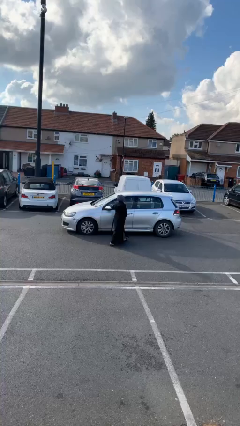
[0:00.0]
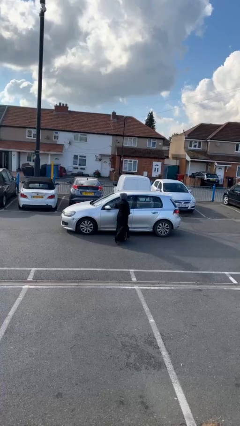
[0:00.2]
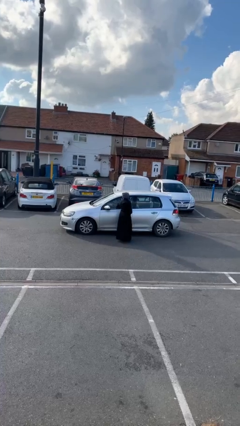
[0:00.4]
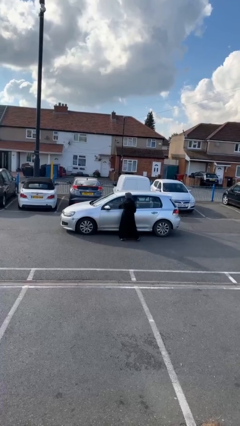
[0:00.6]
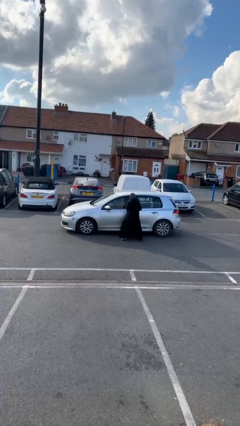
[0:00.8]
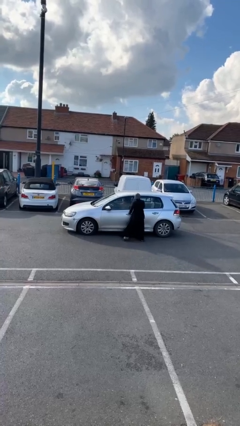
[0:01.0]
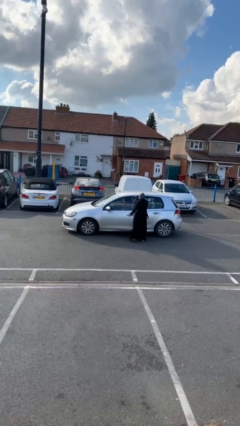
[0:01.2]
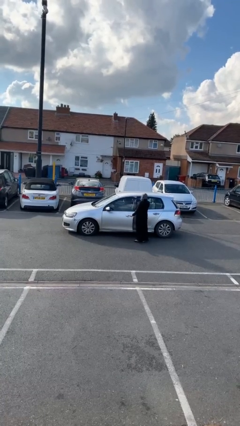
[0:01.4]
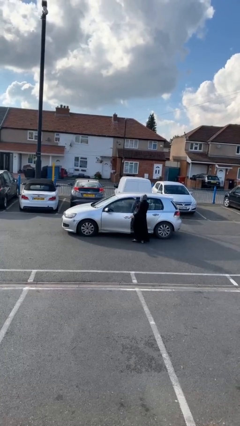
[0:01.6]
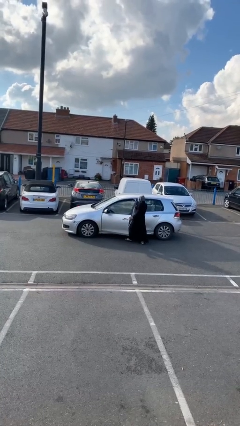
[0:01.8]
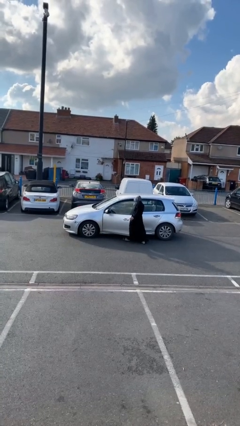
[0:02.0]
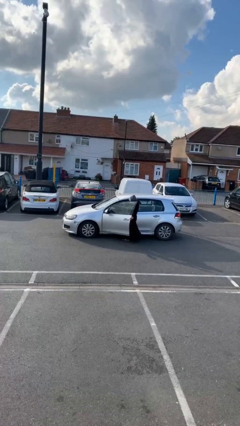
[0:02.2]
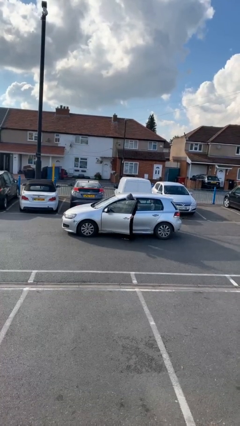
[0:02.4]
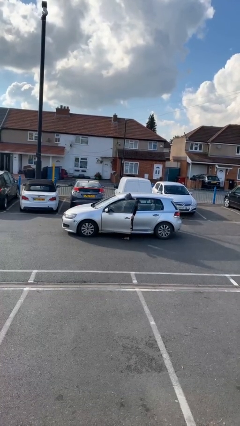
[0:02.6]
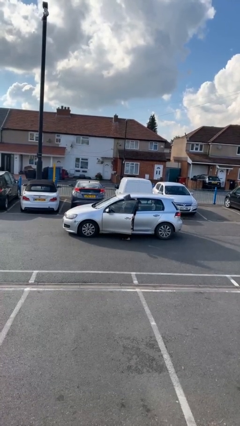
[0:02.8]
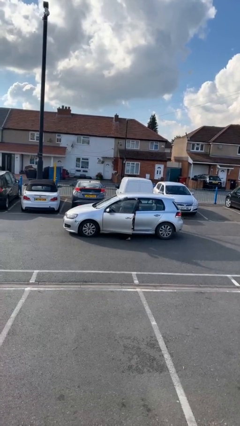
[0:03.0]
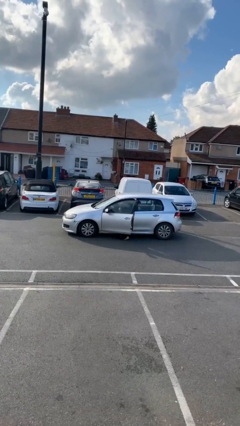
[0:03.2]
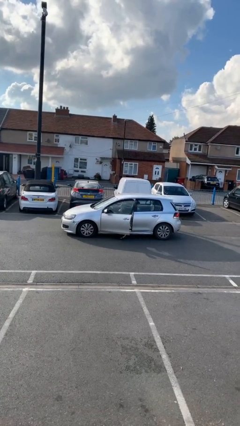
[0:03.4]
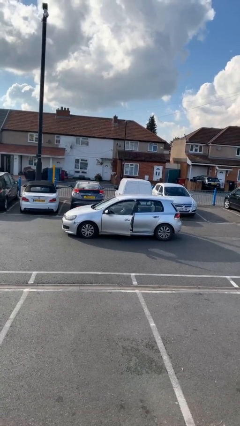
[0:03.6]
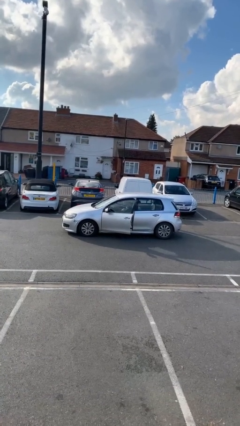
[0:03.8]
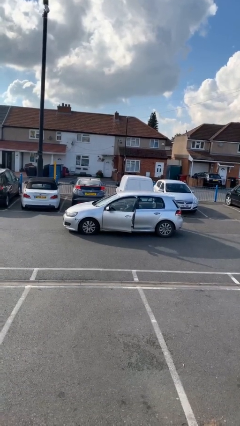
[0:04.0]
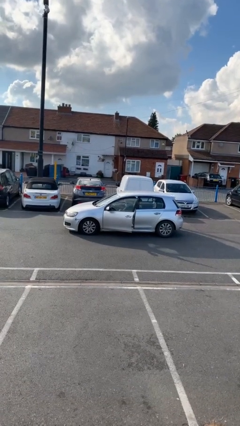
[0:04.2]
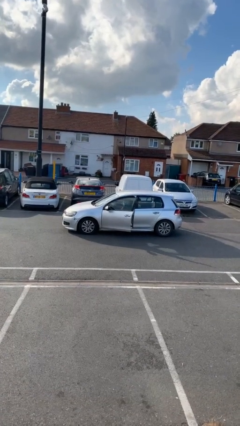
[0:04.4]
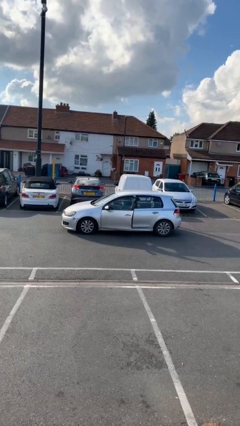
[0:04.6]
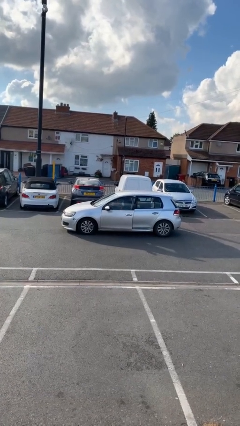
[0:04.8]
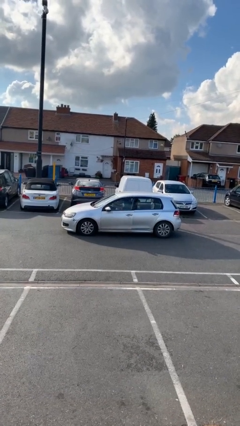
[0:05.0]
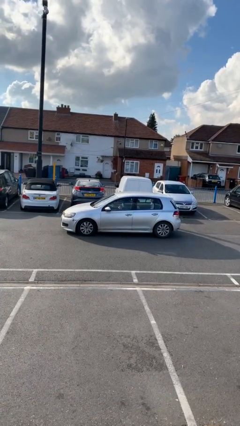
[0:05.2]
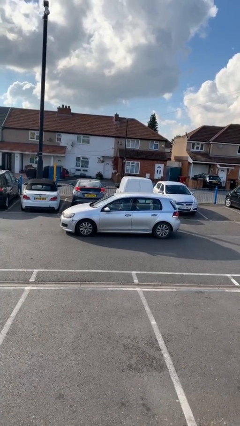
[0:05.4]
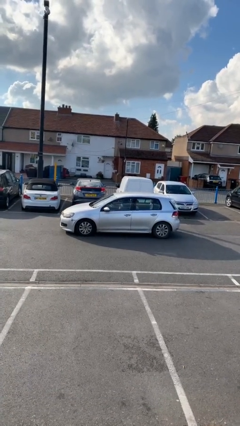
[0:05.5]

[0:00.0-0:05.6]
car picks up person

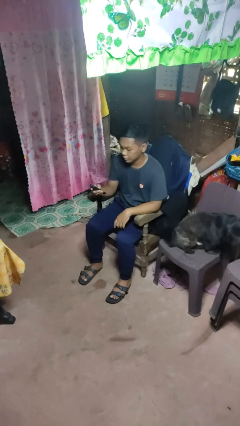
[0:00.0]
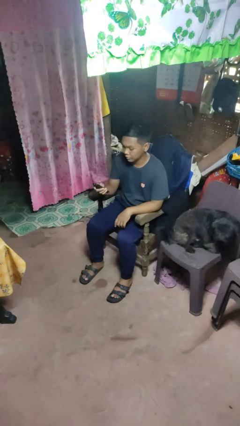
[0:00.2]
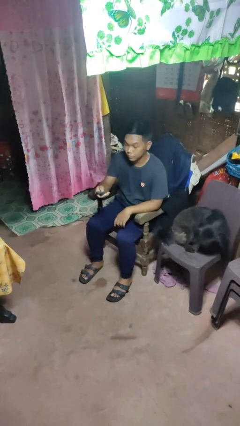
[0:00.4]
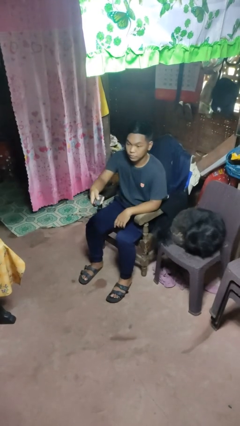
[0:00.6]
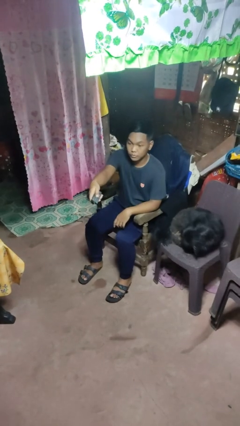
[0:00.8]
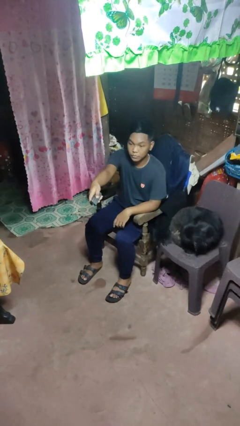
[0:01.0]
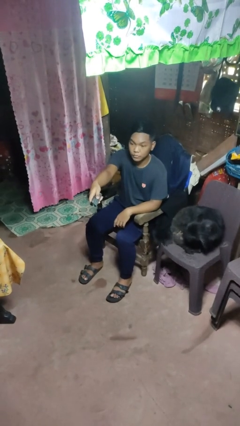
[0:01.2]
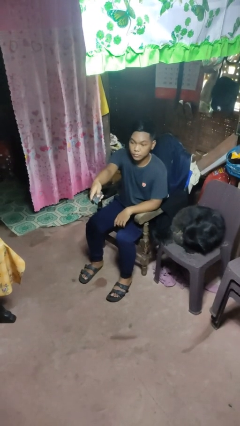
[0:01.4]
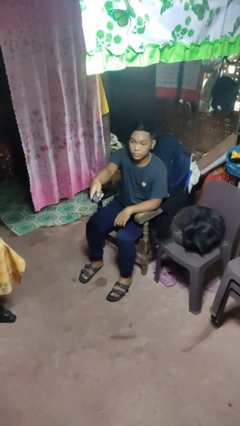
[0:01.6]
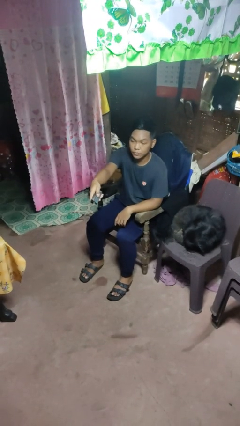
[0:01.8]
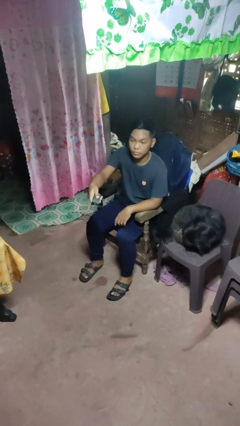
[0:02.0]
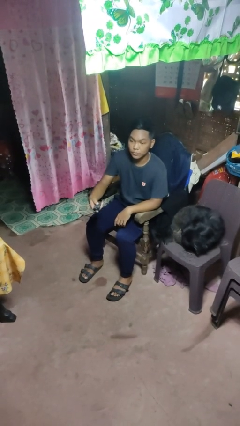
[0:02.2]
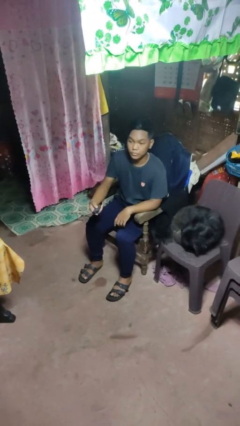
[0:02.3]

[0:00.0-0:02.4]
person uses television remote

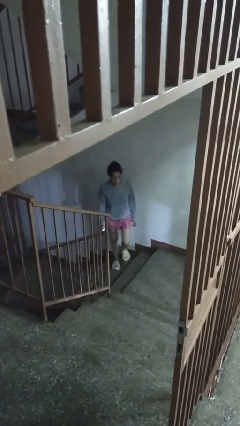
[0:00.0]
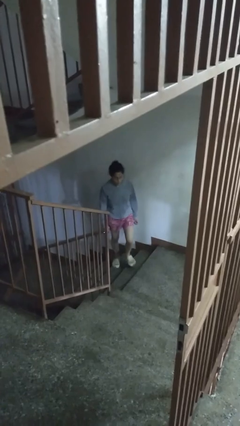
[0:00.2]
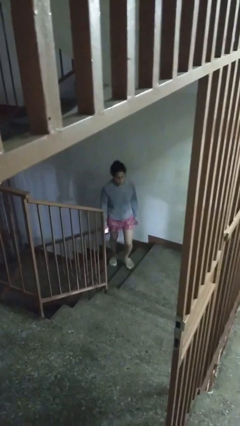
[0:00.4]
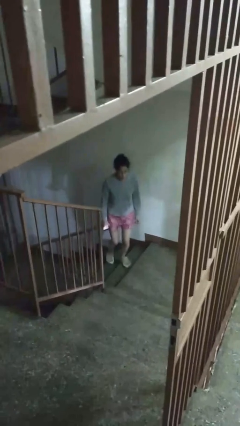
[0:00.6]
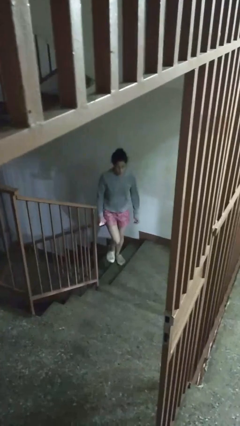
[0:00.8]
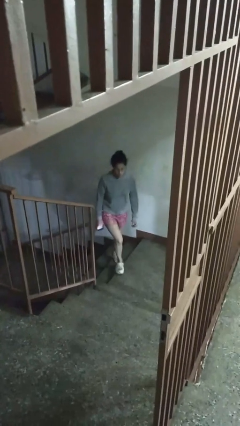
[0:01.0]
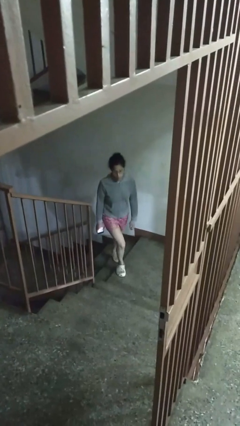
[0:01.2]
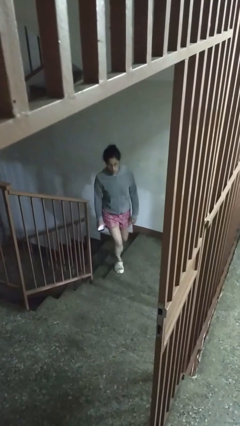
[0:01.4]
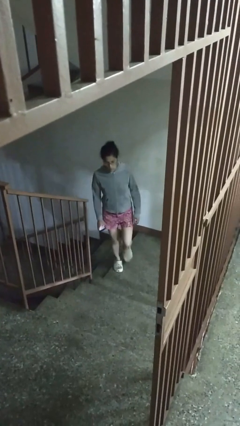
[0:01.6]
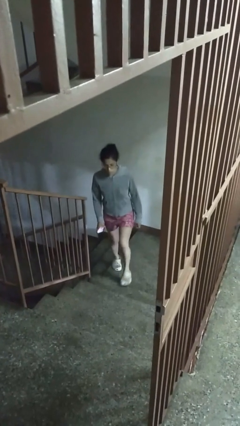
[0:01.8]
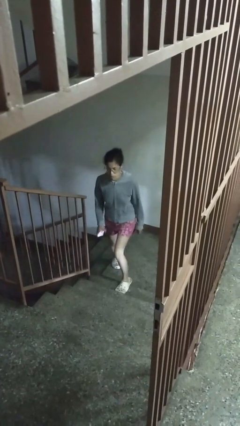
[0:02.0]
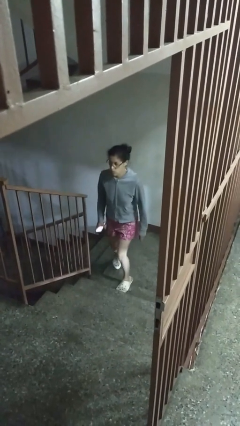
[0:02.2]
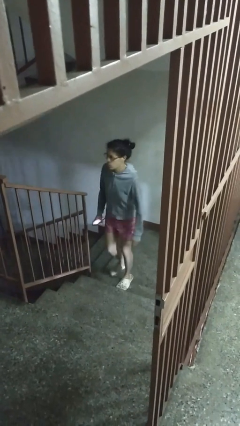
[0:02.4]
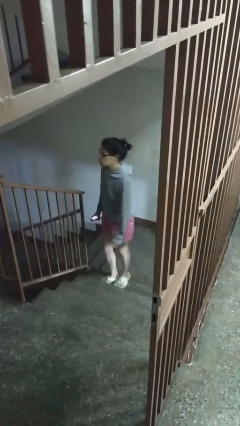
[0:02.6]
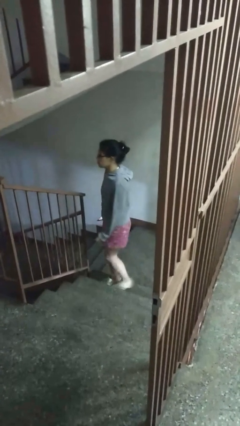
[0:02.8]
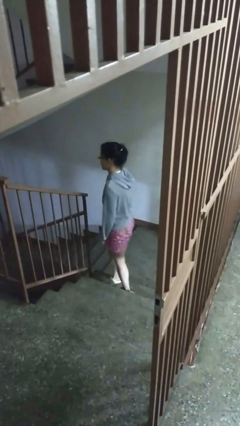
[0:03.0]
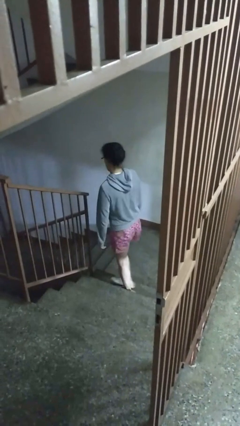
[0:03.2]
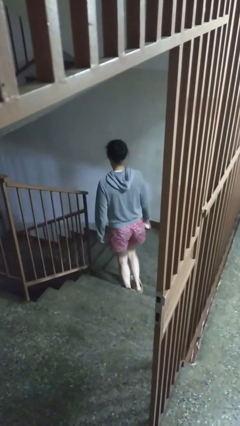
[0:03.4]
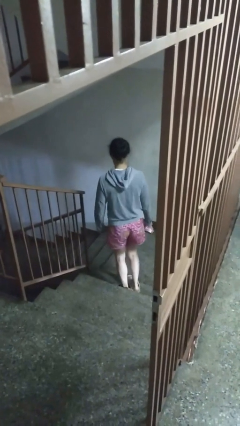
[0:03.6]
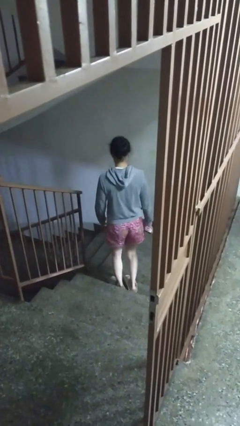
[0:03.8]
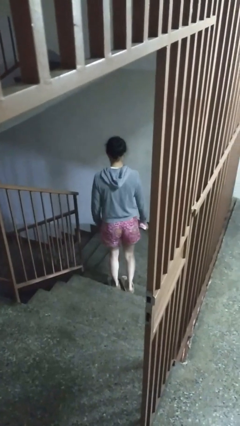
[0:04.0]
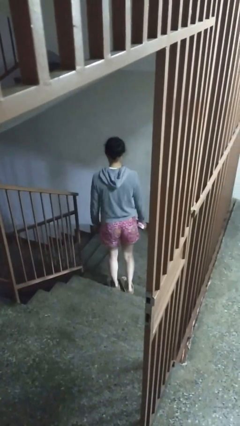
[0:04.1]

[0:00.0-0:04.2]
person climbs up stairs

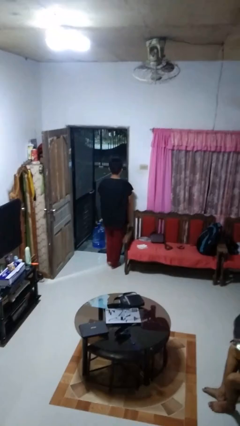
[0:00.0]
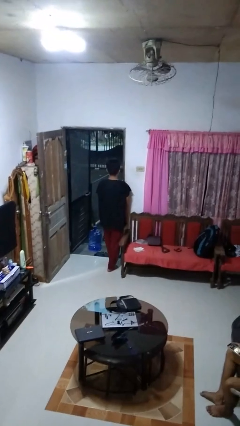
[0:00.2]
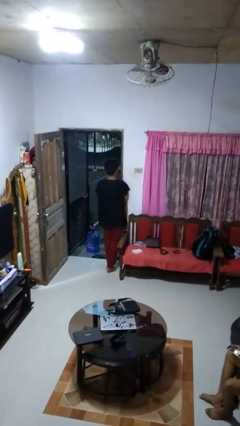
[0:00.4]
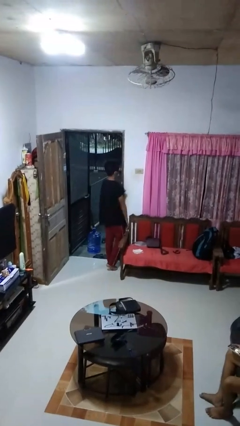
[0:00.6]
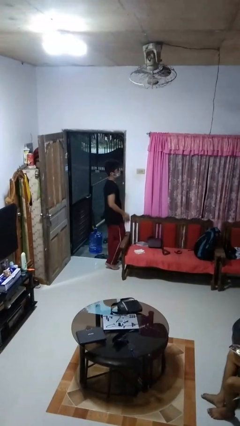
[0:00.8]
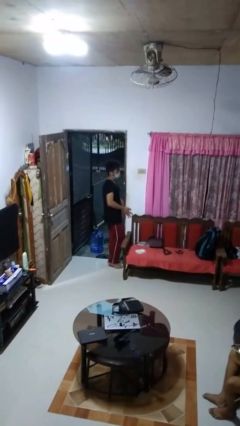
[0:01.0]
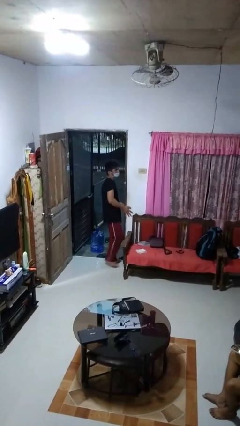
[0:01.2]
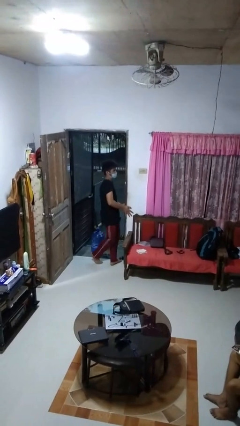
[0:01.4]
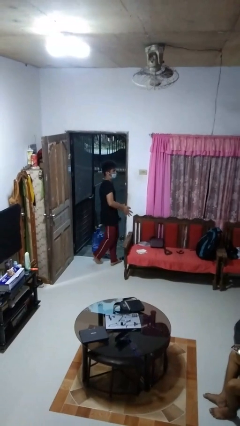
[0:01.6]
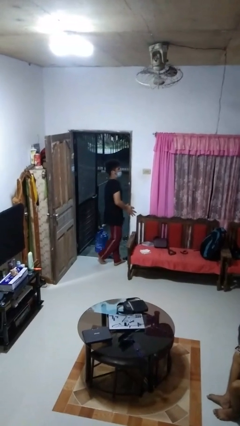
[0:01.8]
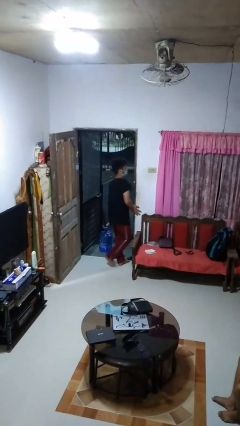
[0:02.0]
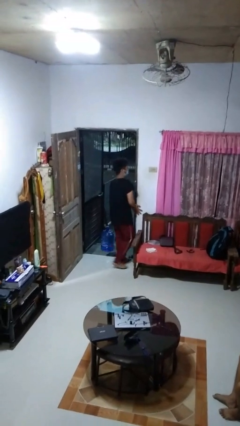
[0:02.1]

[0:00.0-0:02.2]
person bumps into wall

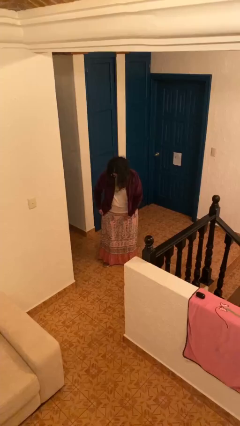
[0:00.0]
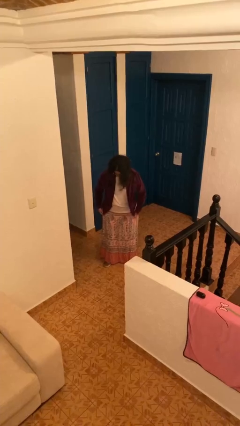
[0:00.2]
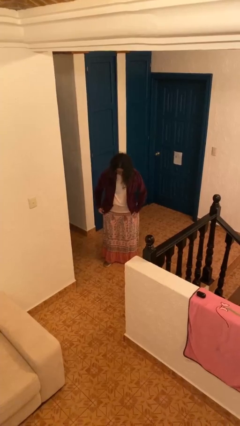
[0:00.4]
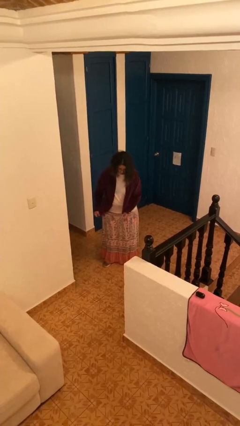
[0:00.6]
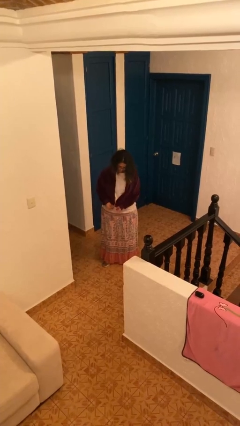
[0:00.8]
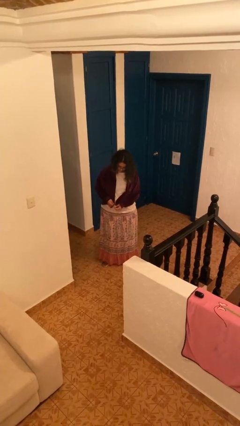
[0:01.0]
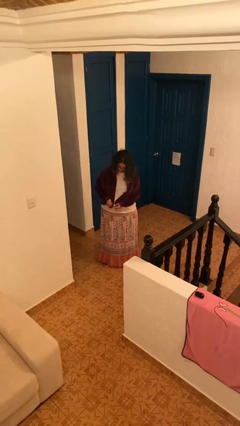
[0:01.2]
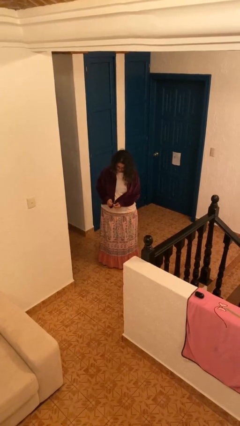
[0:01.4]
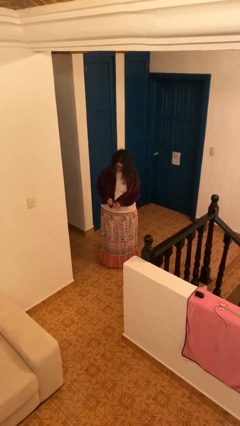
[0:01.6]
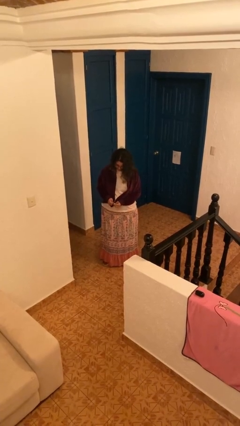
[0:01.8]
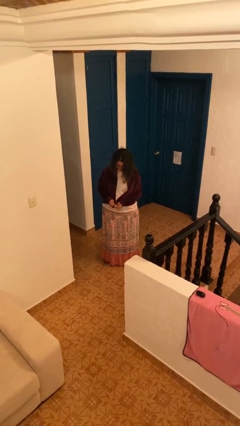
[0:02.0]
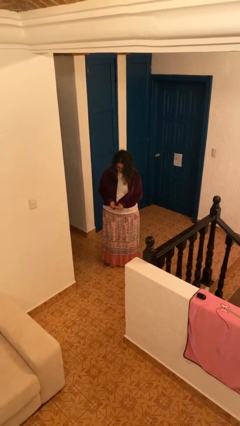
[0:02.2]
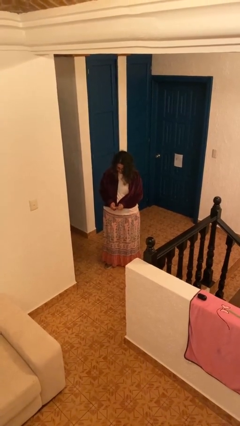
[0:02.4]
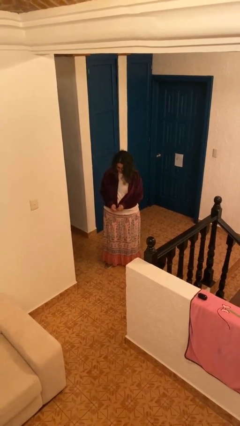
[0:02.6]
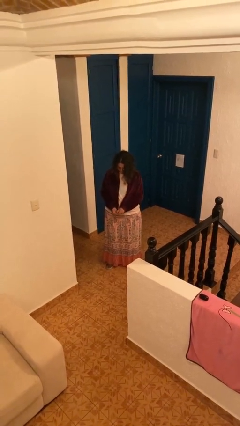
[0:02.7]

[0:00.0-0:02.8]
person zips up jacket

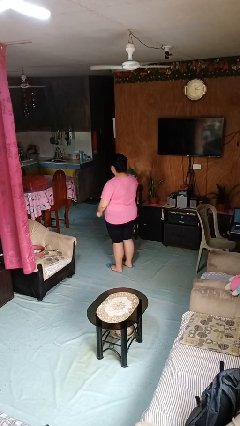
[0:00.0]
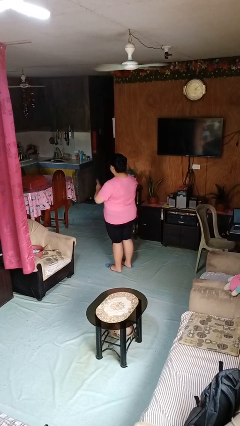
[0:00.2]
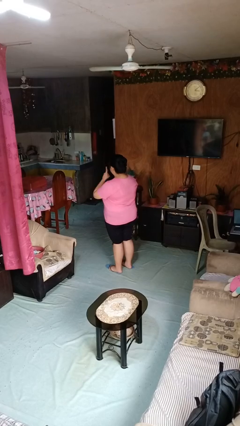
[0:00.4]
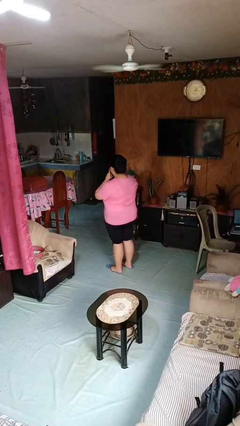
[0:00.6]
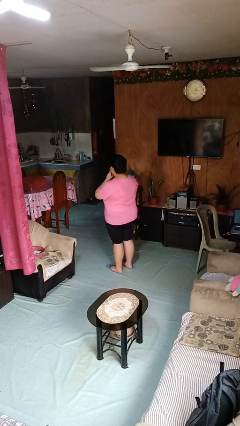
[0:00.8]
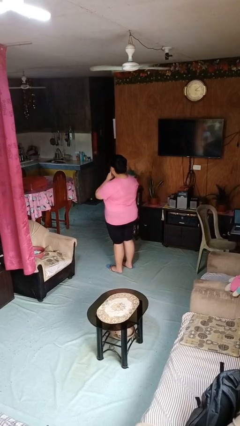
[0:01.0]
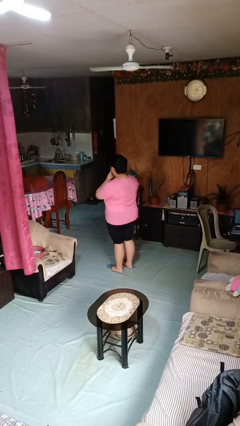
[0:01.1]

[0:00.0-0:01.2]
person gestures blow kiss
